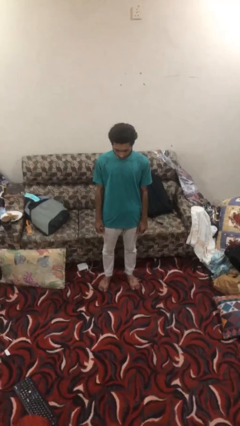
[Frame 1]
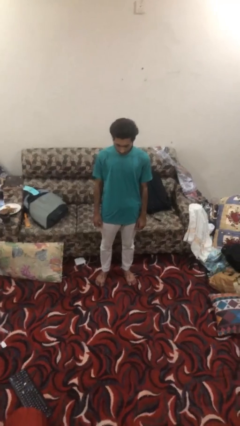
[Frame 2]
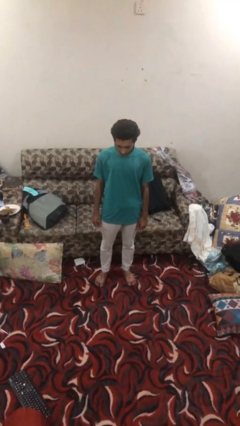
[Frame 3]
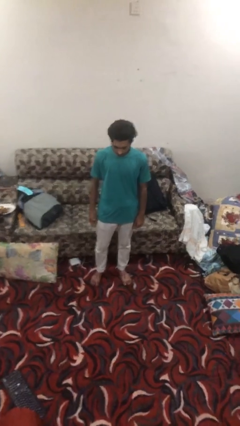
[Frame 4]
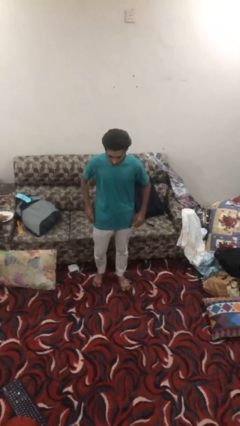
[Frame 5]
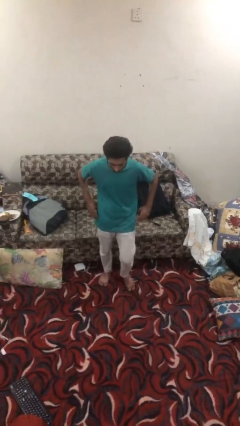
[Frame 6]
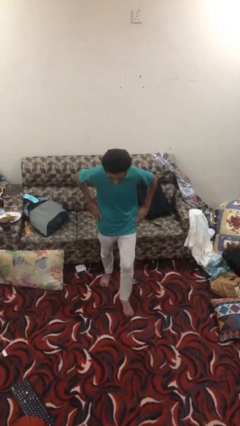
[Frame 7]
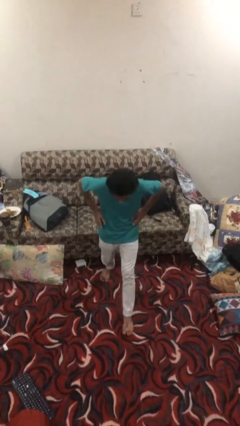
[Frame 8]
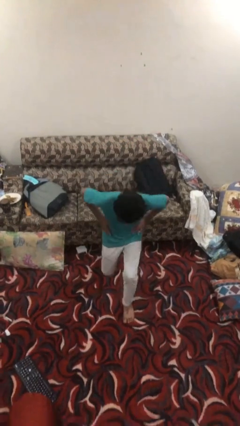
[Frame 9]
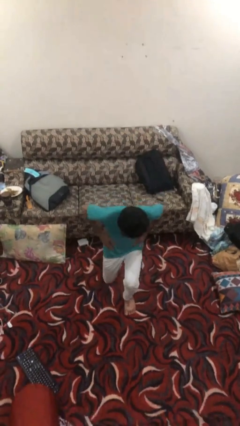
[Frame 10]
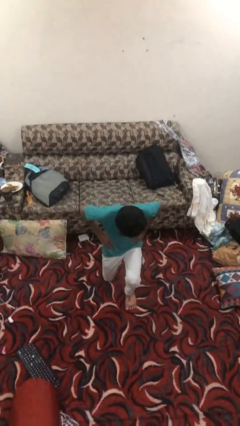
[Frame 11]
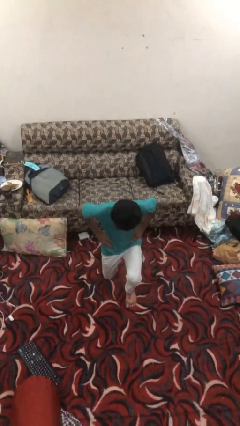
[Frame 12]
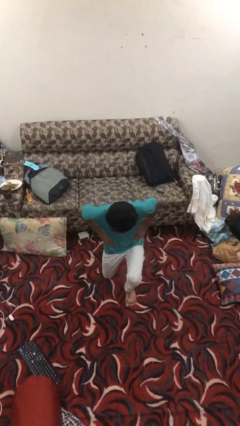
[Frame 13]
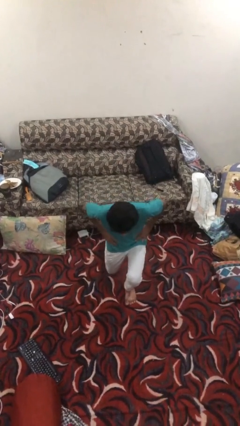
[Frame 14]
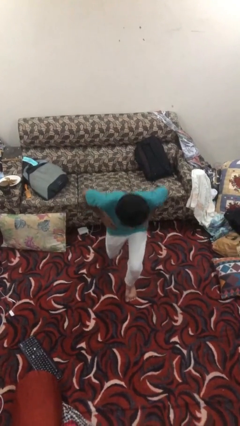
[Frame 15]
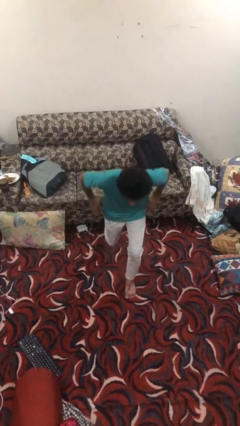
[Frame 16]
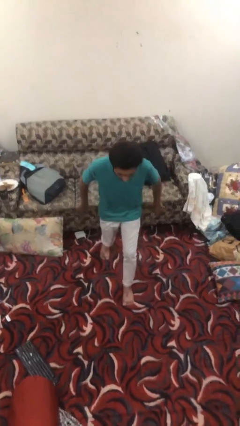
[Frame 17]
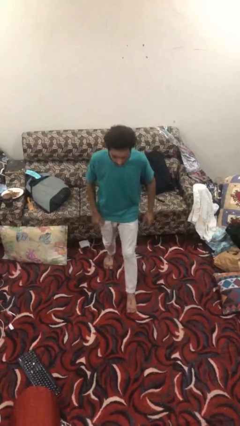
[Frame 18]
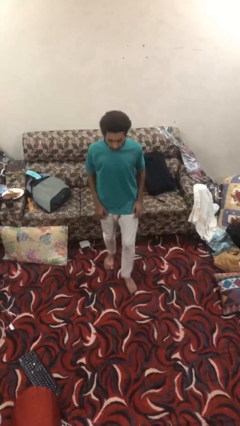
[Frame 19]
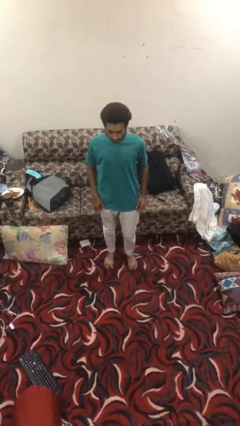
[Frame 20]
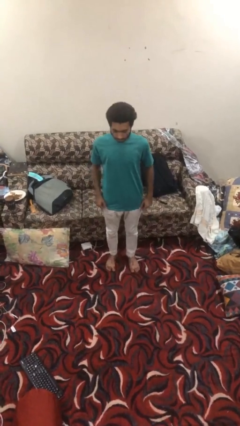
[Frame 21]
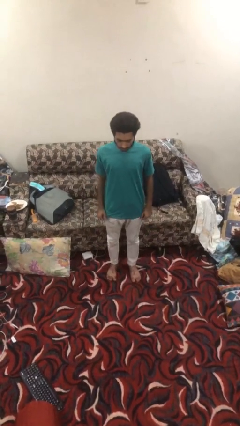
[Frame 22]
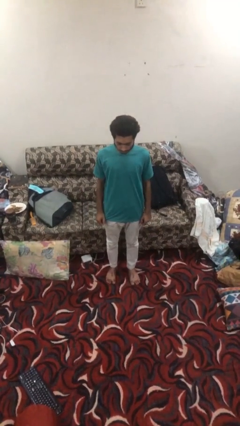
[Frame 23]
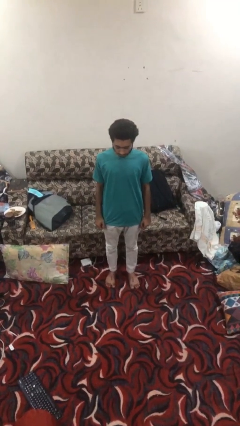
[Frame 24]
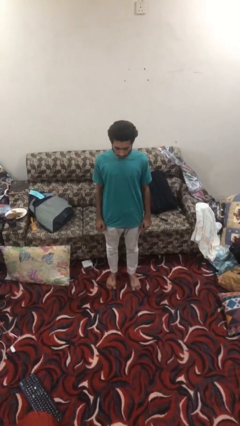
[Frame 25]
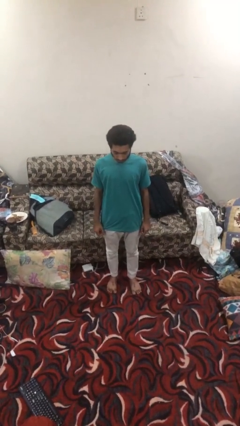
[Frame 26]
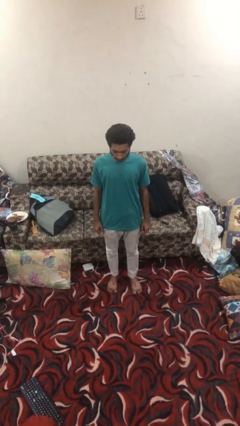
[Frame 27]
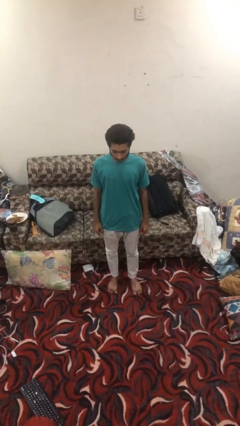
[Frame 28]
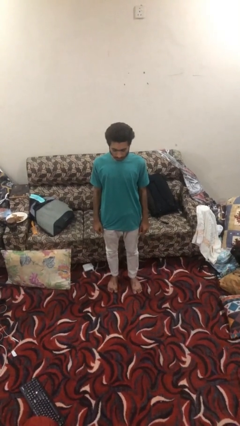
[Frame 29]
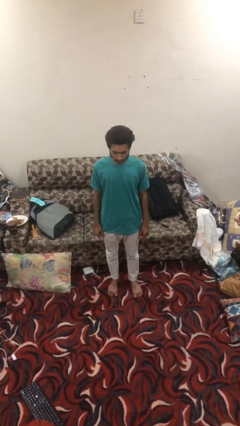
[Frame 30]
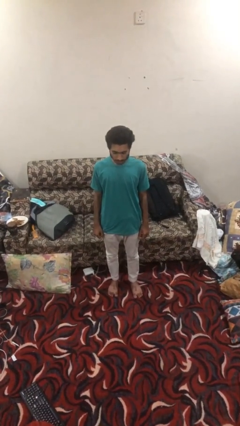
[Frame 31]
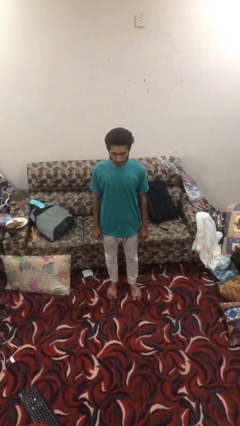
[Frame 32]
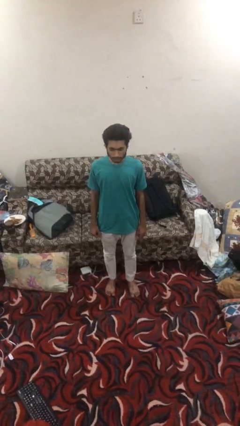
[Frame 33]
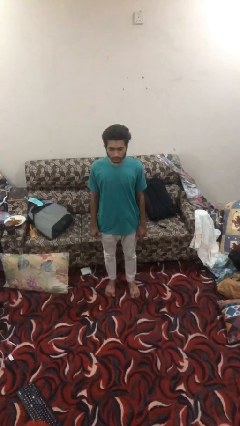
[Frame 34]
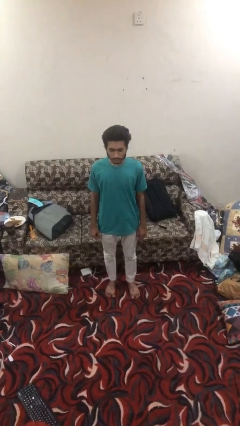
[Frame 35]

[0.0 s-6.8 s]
person exercises with lunges

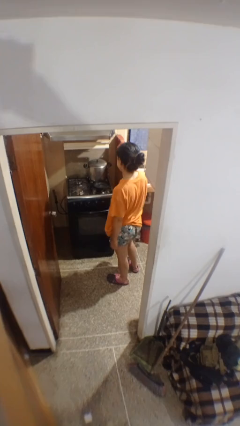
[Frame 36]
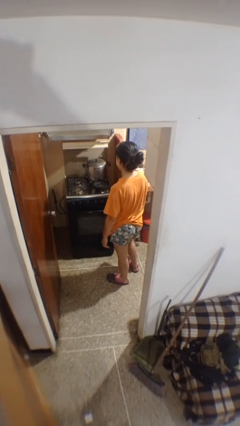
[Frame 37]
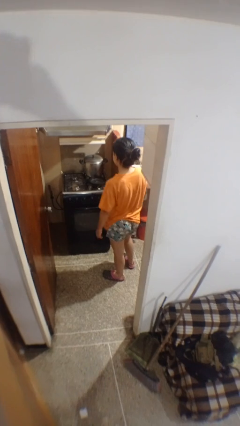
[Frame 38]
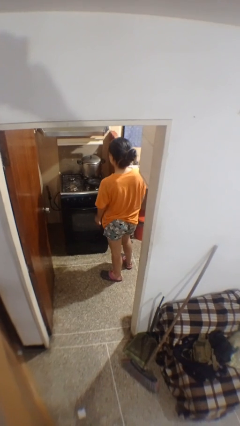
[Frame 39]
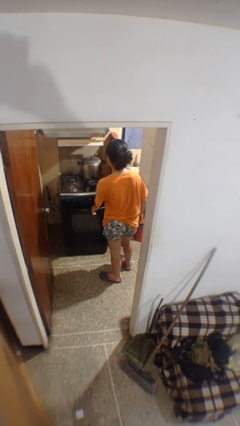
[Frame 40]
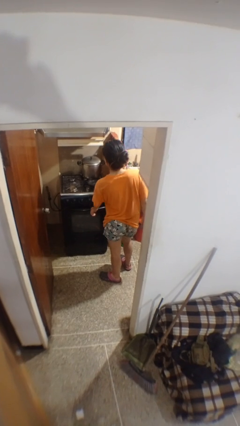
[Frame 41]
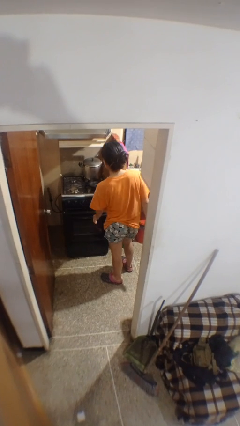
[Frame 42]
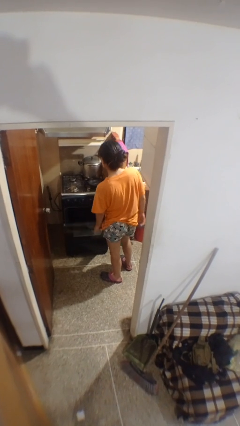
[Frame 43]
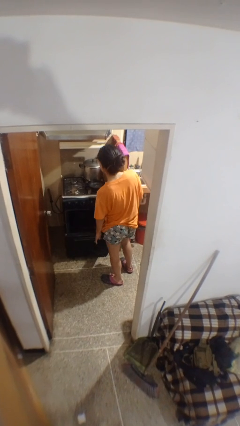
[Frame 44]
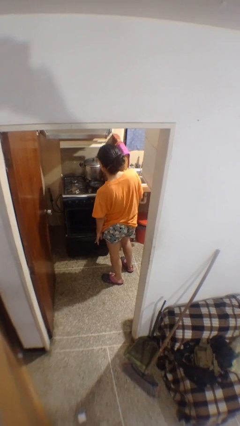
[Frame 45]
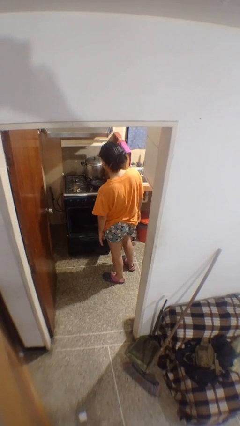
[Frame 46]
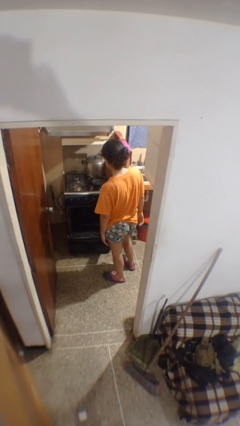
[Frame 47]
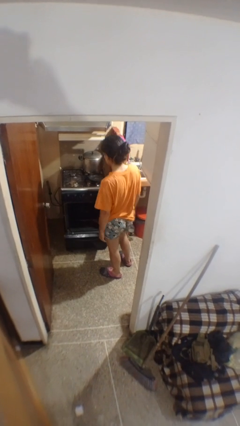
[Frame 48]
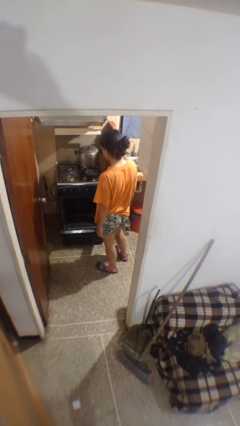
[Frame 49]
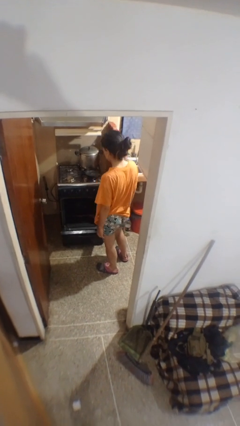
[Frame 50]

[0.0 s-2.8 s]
person opens oven door

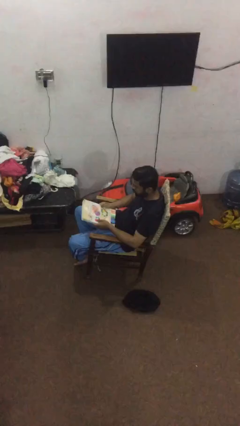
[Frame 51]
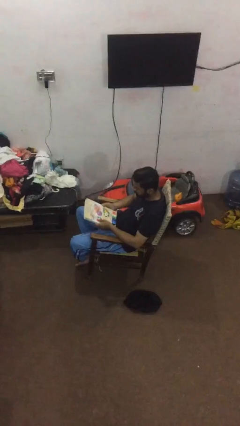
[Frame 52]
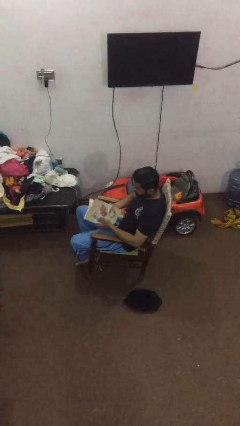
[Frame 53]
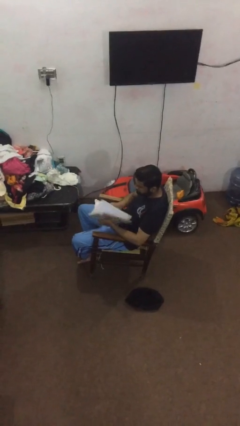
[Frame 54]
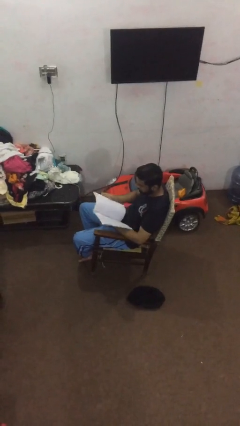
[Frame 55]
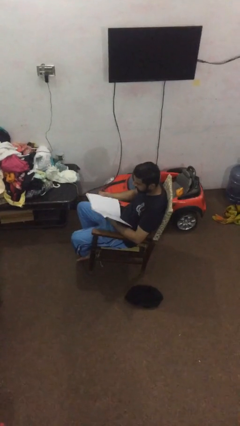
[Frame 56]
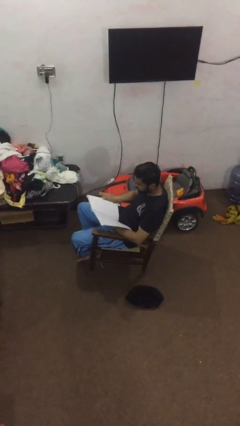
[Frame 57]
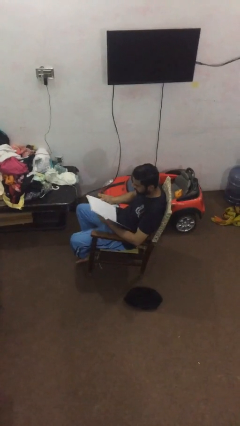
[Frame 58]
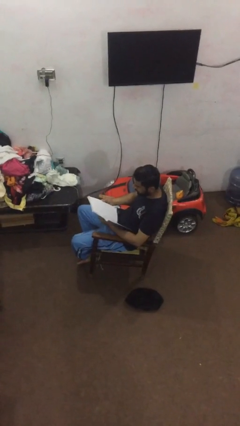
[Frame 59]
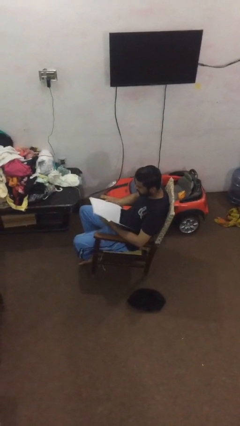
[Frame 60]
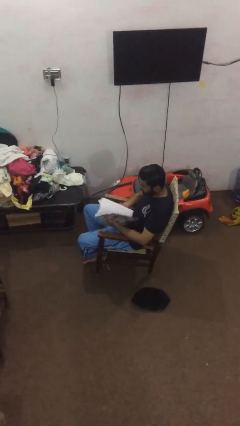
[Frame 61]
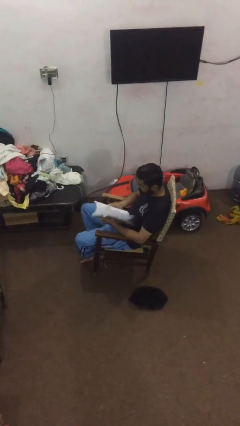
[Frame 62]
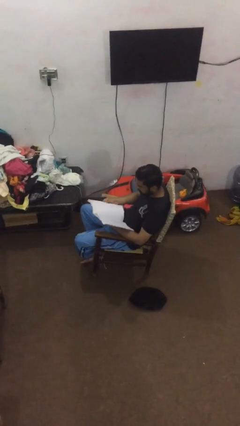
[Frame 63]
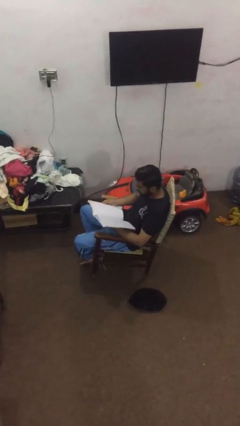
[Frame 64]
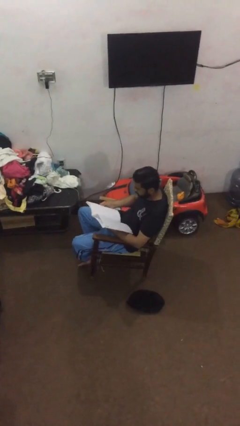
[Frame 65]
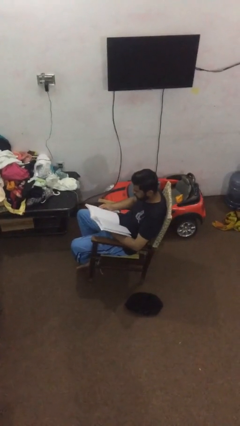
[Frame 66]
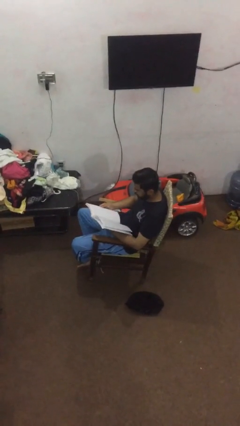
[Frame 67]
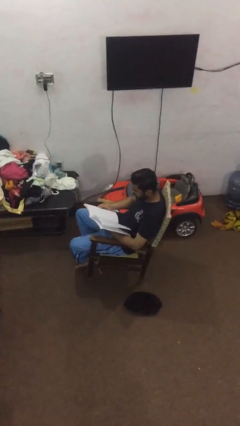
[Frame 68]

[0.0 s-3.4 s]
person reads document

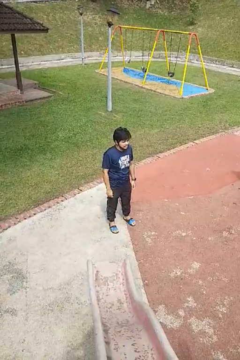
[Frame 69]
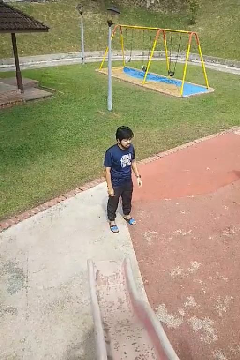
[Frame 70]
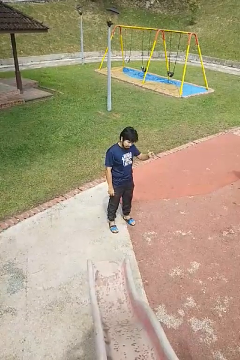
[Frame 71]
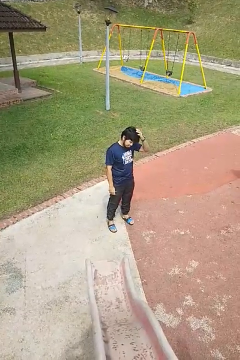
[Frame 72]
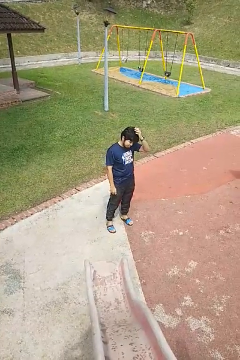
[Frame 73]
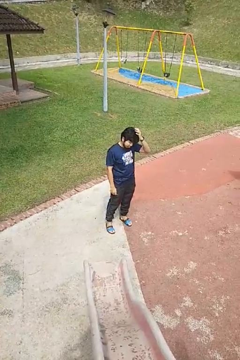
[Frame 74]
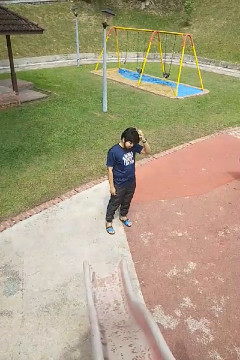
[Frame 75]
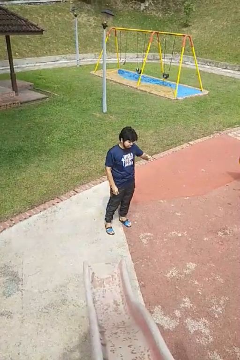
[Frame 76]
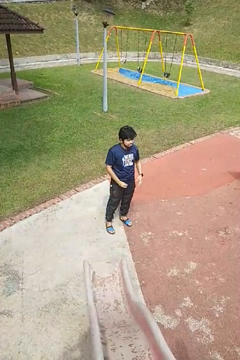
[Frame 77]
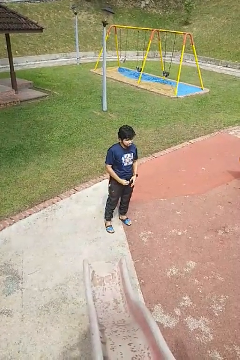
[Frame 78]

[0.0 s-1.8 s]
person pats head

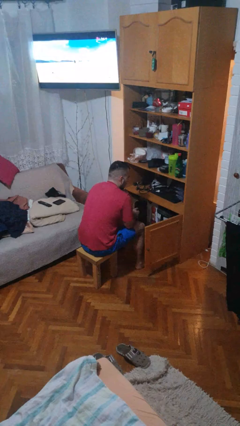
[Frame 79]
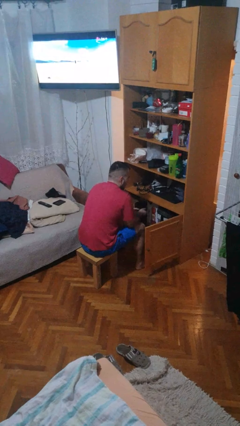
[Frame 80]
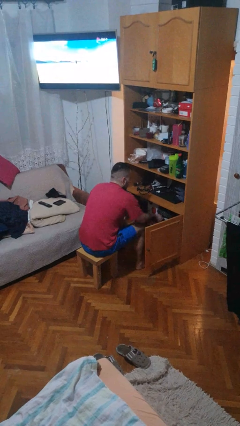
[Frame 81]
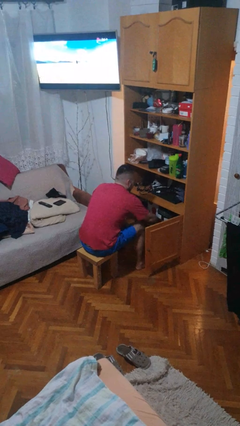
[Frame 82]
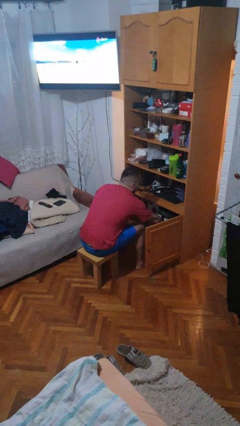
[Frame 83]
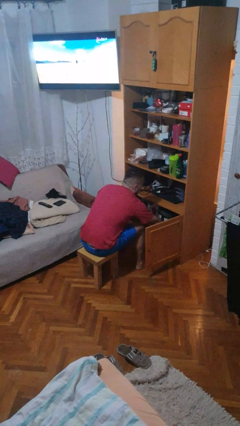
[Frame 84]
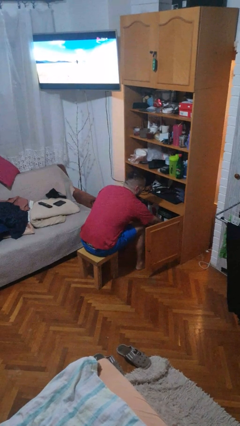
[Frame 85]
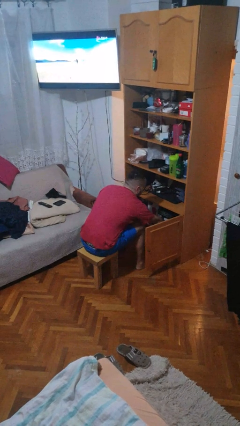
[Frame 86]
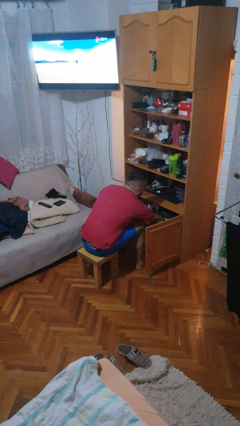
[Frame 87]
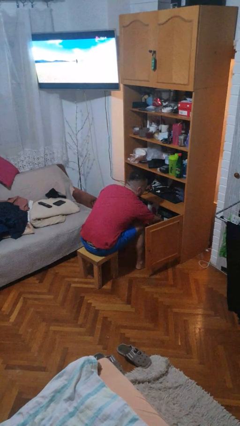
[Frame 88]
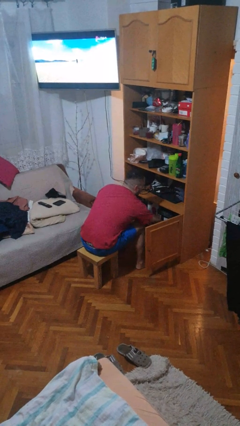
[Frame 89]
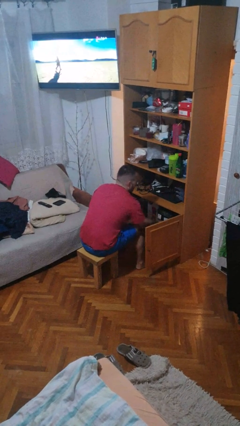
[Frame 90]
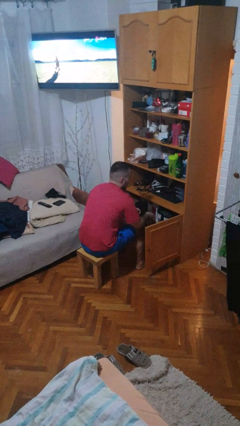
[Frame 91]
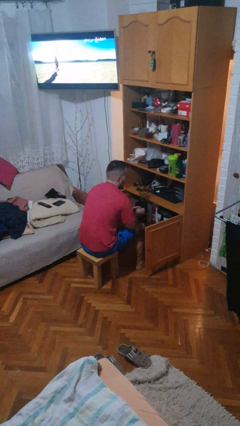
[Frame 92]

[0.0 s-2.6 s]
person searches in cabinet

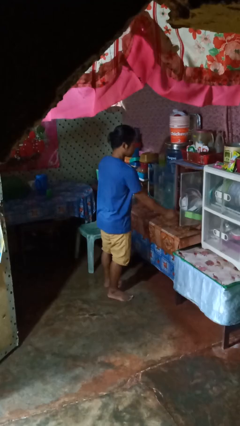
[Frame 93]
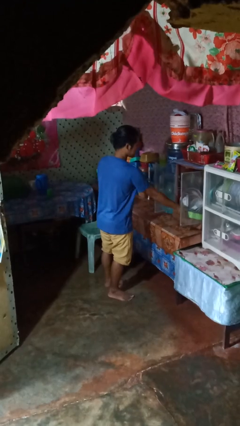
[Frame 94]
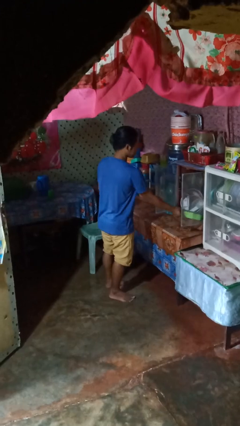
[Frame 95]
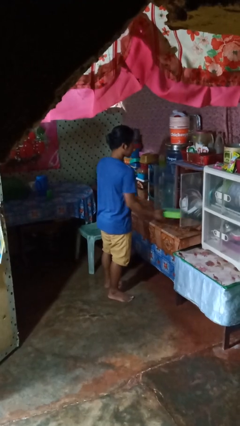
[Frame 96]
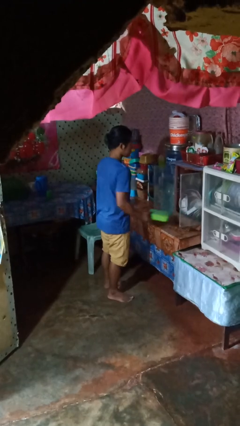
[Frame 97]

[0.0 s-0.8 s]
person picks up object from cabinet
